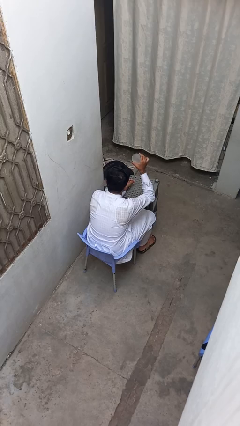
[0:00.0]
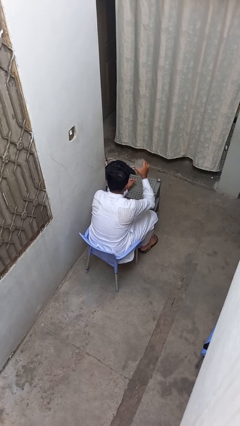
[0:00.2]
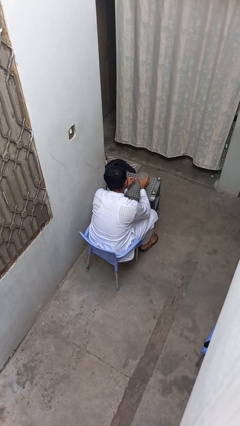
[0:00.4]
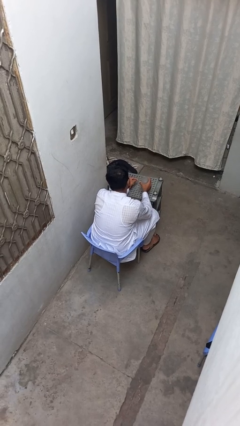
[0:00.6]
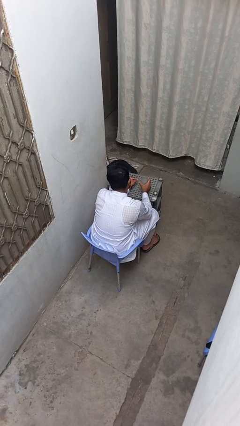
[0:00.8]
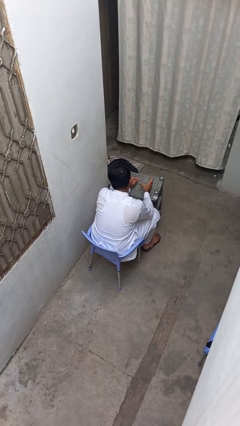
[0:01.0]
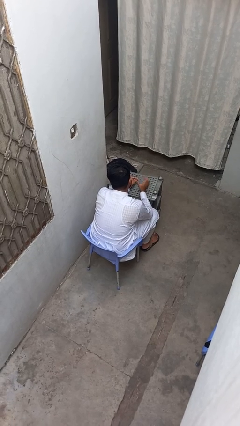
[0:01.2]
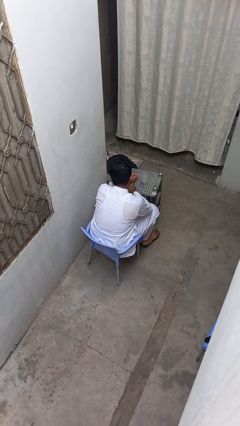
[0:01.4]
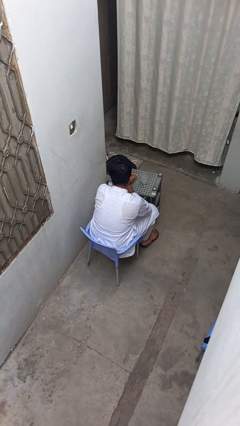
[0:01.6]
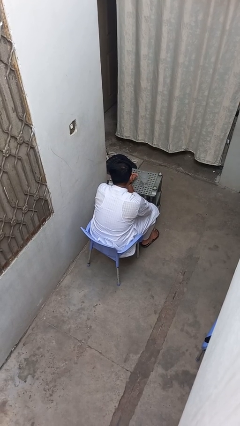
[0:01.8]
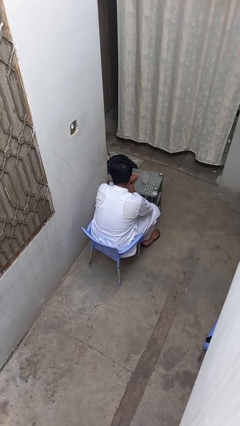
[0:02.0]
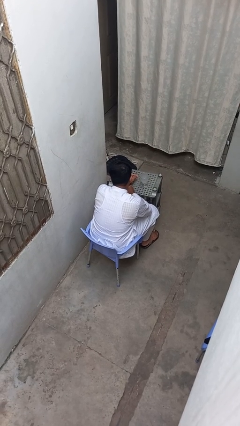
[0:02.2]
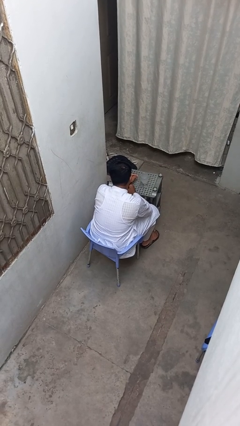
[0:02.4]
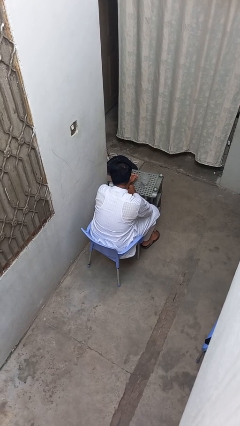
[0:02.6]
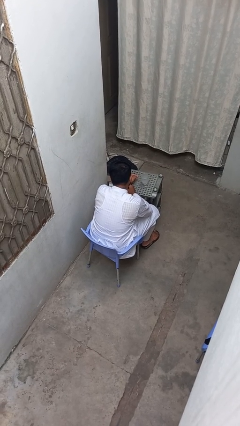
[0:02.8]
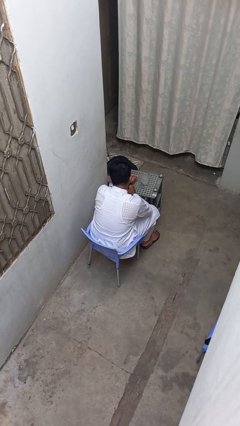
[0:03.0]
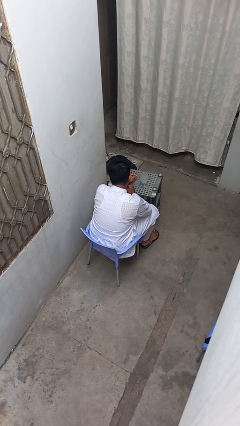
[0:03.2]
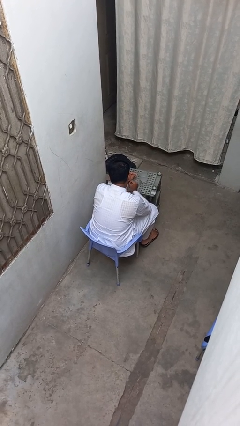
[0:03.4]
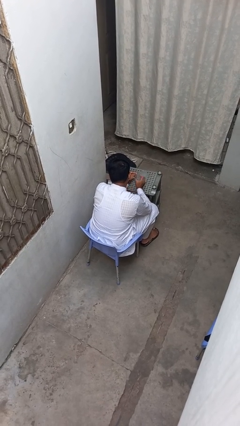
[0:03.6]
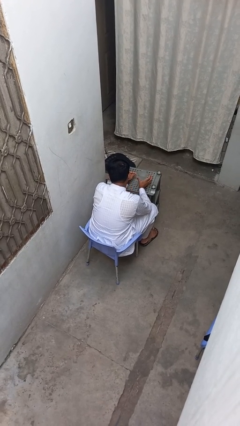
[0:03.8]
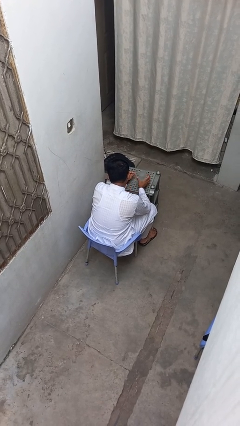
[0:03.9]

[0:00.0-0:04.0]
person puts down object on table

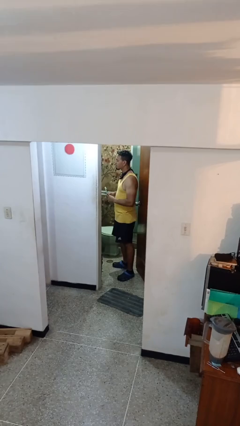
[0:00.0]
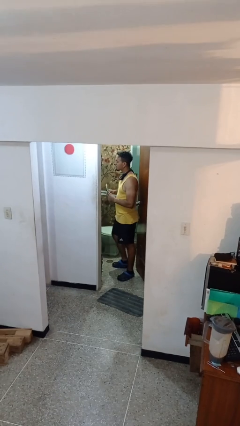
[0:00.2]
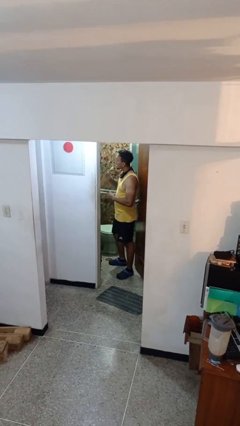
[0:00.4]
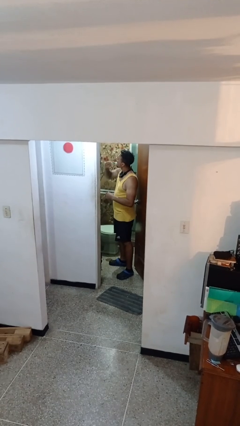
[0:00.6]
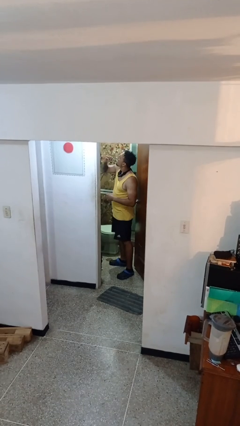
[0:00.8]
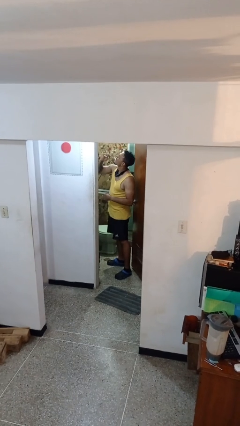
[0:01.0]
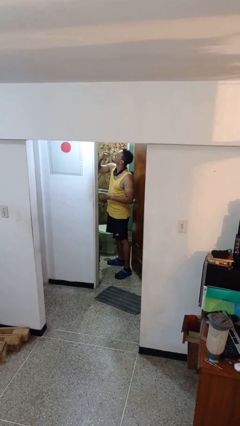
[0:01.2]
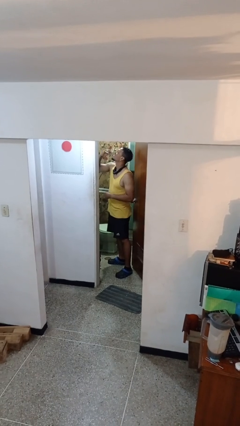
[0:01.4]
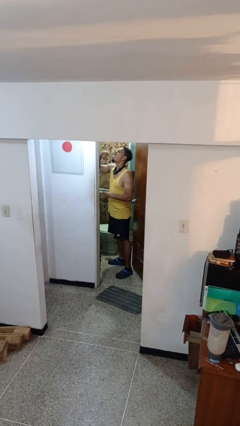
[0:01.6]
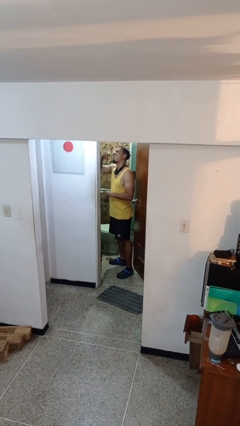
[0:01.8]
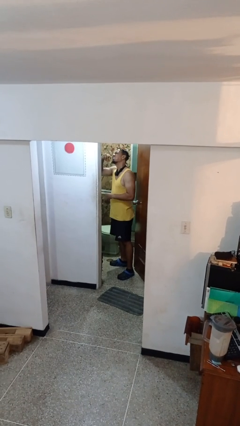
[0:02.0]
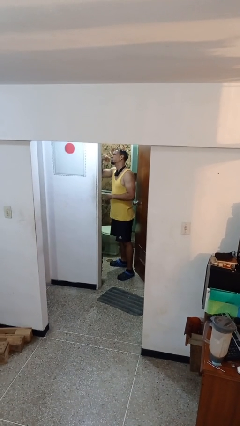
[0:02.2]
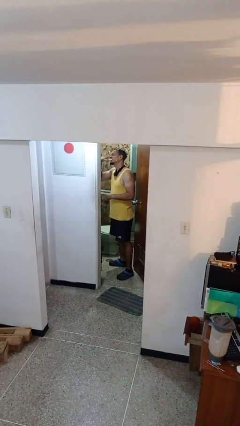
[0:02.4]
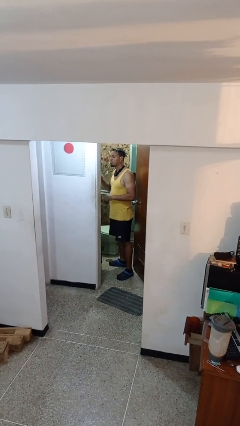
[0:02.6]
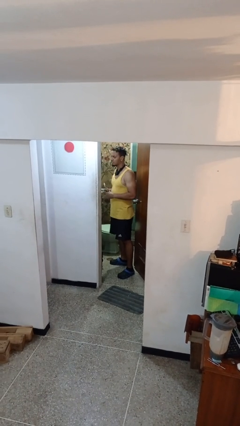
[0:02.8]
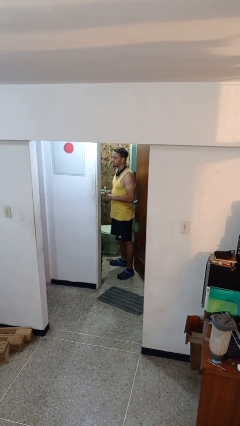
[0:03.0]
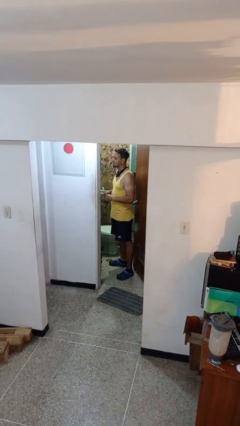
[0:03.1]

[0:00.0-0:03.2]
person brushes teeth

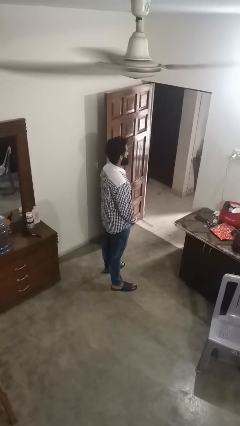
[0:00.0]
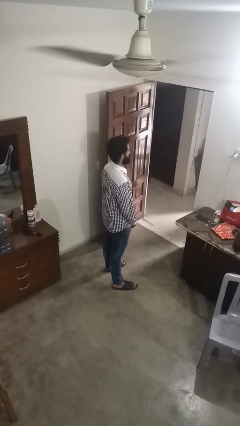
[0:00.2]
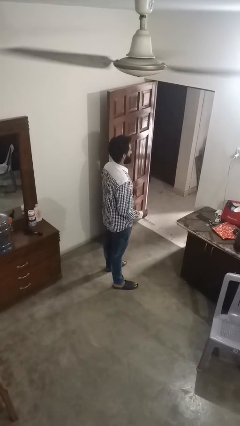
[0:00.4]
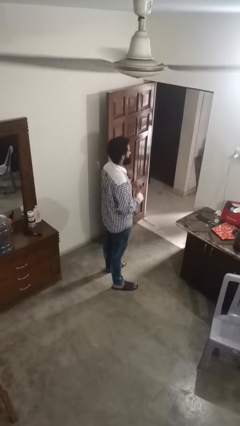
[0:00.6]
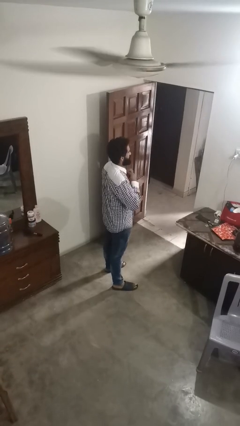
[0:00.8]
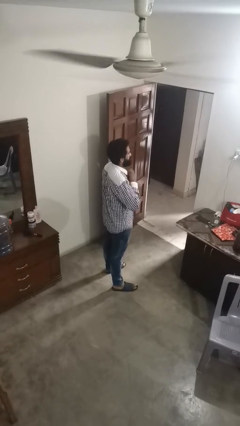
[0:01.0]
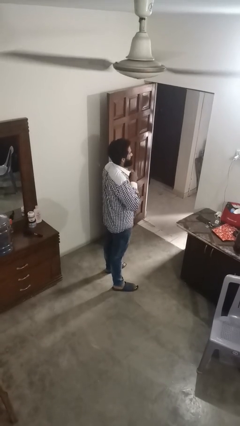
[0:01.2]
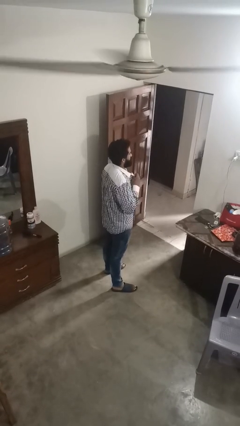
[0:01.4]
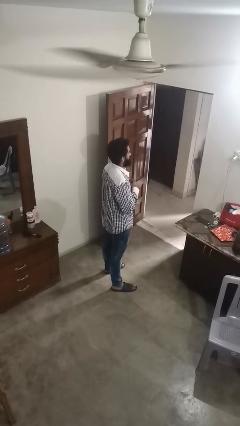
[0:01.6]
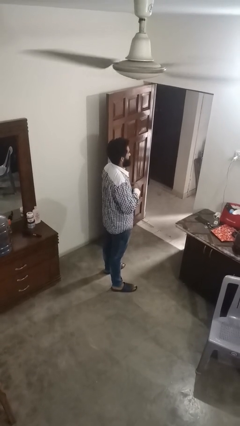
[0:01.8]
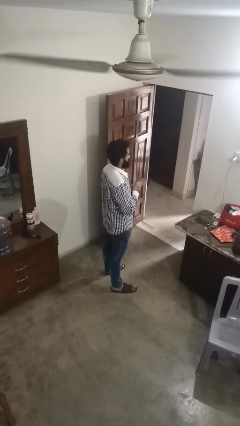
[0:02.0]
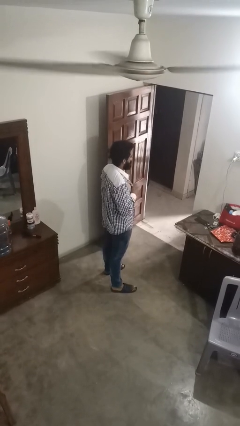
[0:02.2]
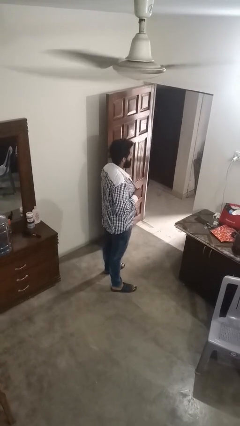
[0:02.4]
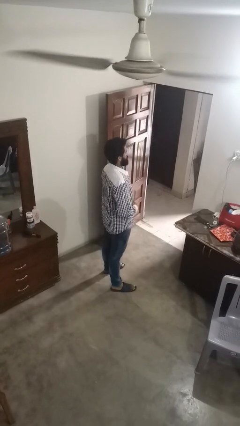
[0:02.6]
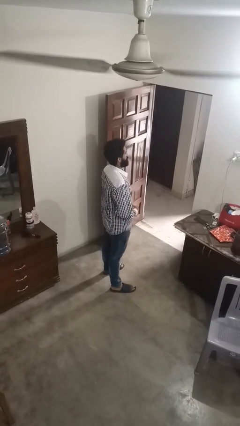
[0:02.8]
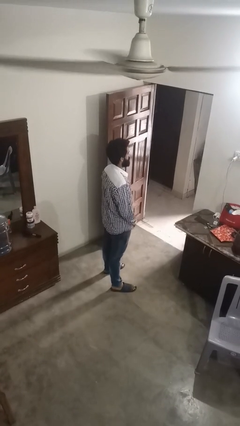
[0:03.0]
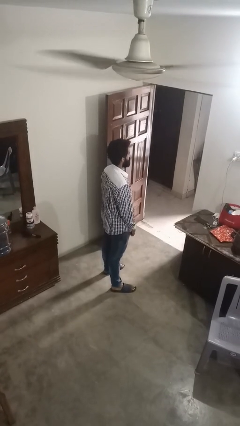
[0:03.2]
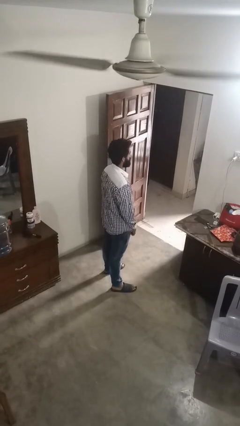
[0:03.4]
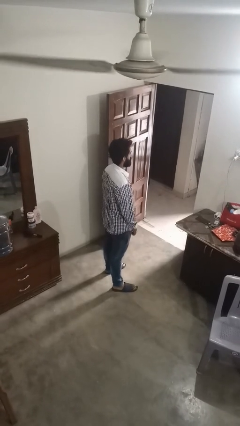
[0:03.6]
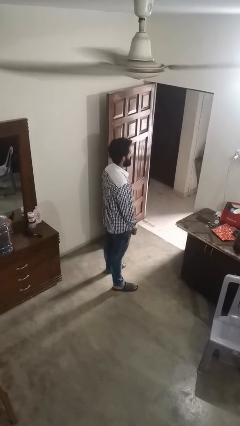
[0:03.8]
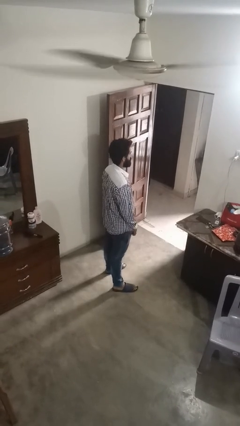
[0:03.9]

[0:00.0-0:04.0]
person unbuttons shirt

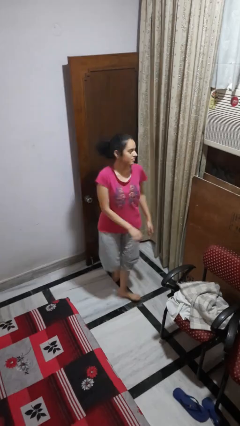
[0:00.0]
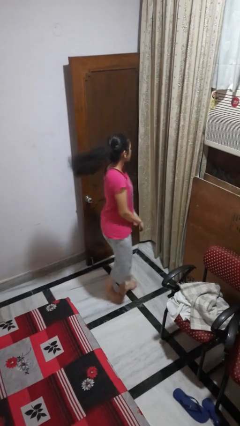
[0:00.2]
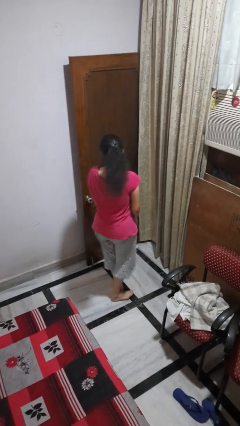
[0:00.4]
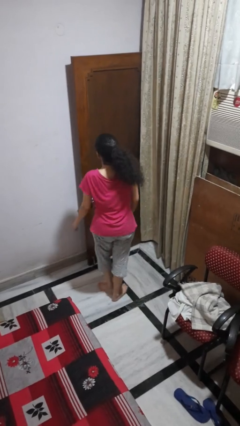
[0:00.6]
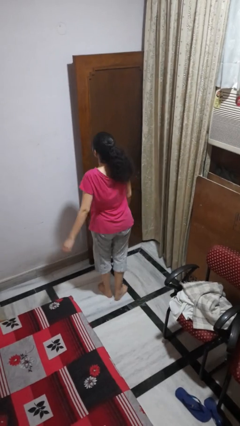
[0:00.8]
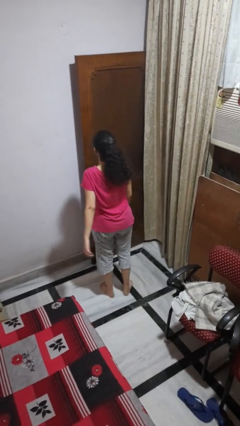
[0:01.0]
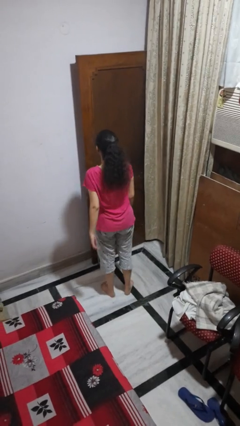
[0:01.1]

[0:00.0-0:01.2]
person twirls

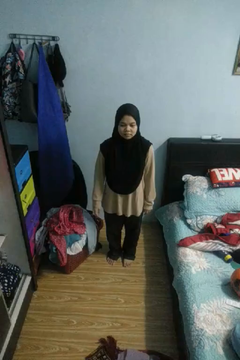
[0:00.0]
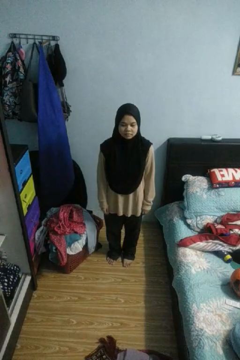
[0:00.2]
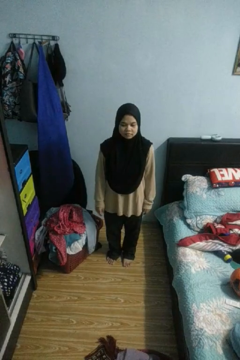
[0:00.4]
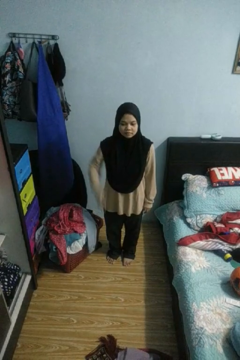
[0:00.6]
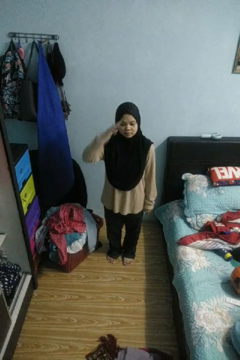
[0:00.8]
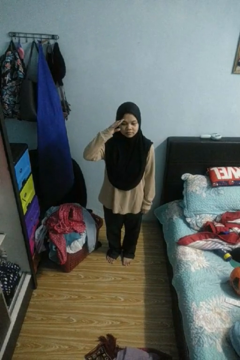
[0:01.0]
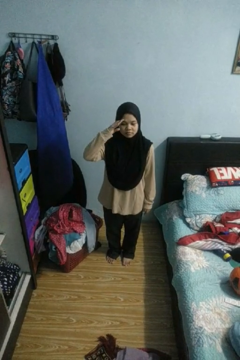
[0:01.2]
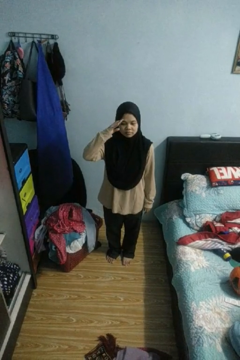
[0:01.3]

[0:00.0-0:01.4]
person salutes

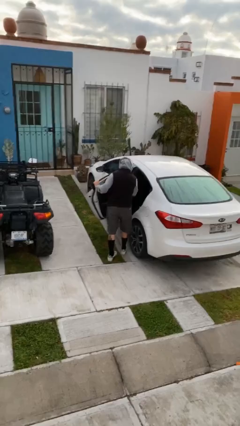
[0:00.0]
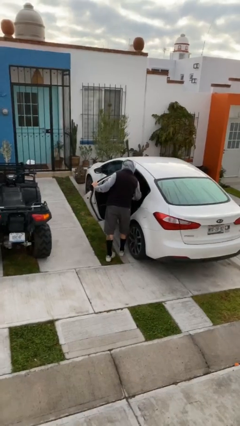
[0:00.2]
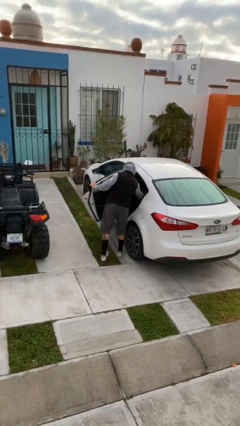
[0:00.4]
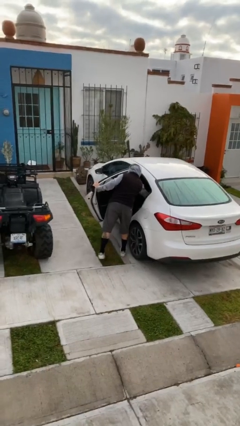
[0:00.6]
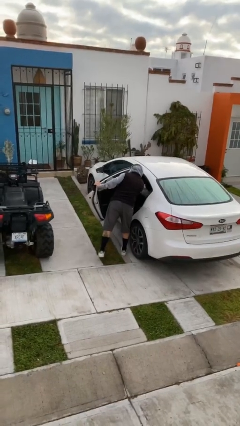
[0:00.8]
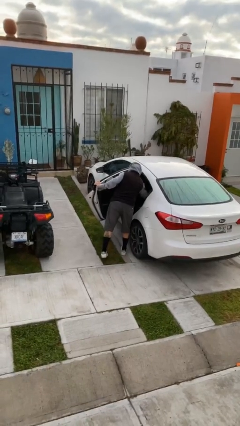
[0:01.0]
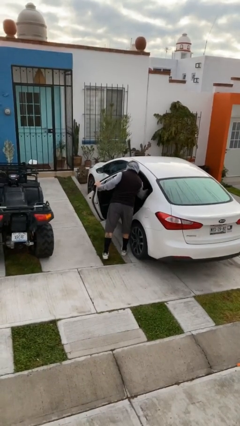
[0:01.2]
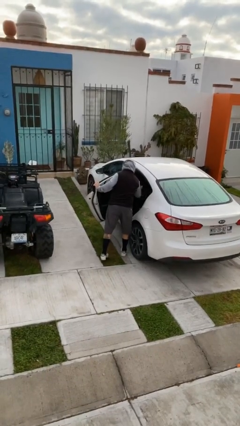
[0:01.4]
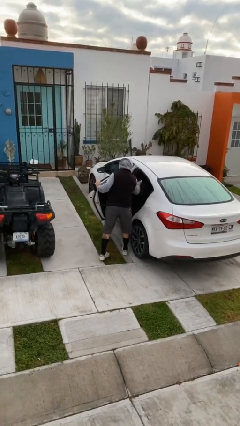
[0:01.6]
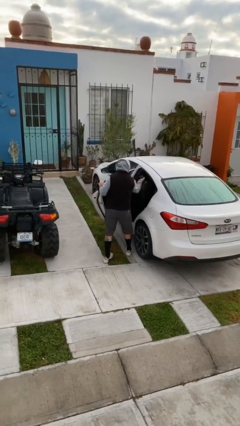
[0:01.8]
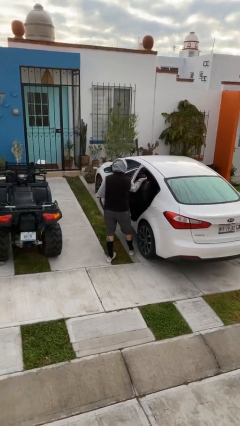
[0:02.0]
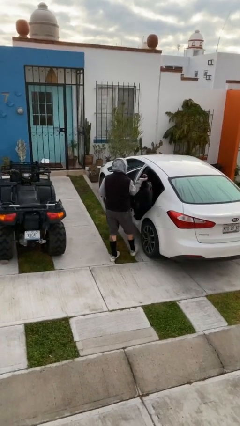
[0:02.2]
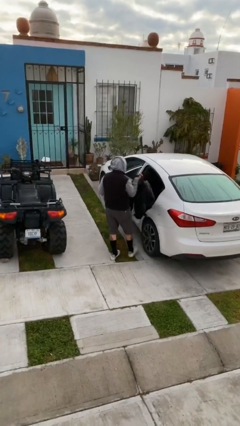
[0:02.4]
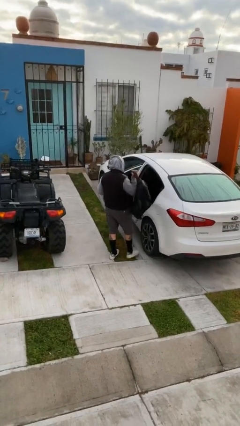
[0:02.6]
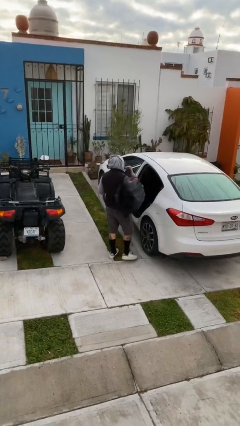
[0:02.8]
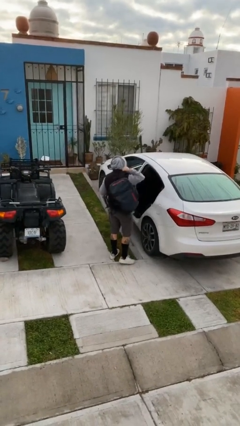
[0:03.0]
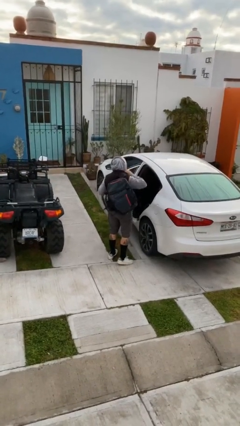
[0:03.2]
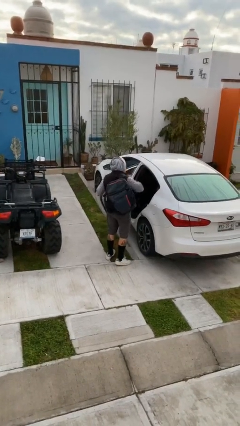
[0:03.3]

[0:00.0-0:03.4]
person unloads car

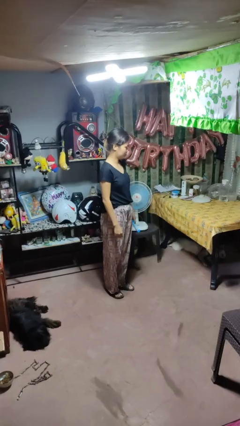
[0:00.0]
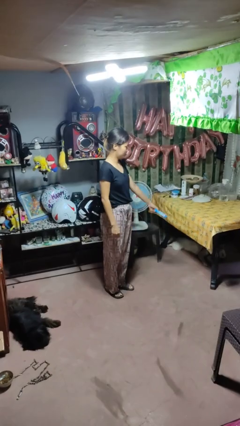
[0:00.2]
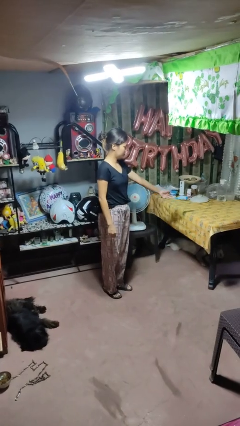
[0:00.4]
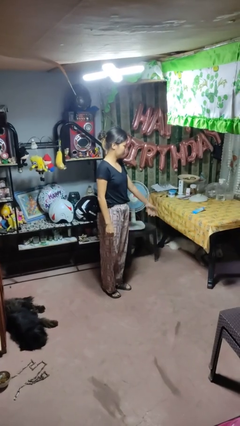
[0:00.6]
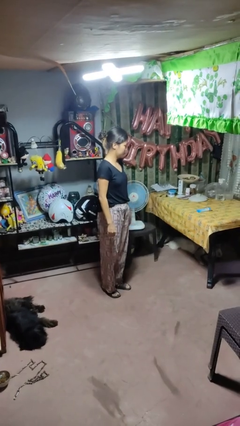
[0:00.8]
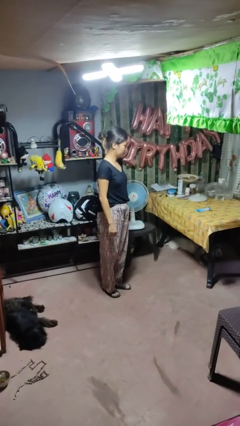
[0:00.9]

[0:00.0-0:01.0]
person throws object on table
